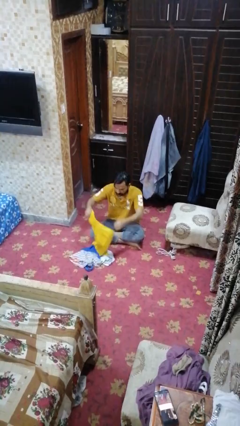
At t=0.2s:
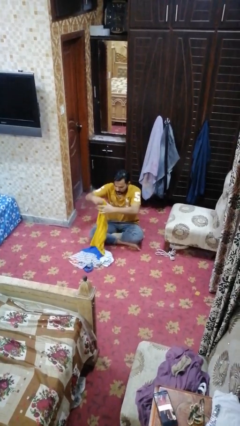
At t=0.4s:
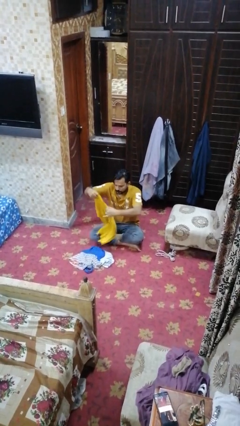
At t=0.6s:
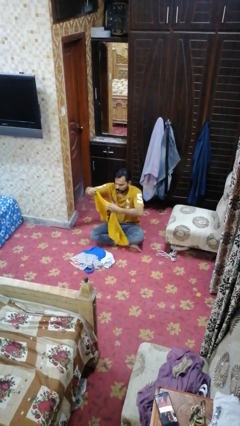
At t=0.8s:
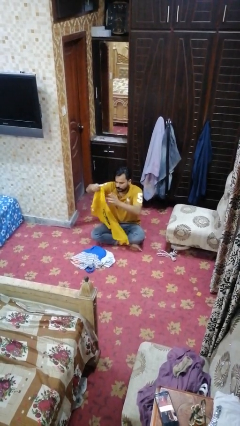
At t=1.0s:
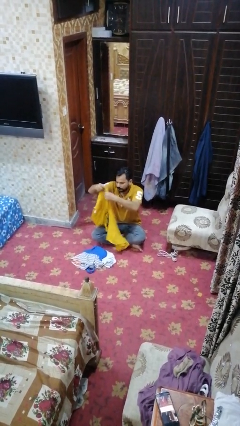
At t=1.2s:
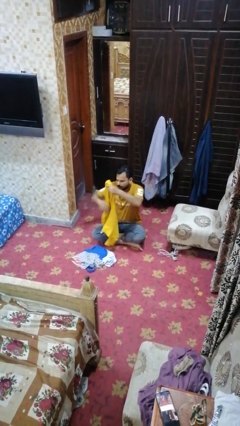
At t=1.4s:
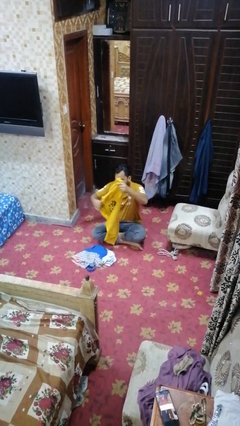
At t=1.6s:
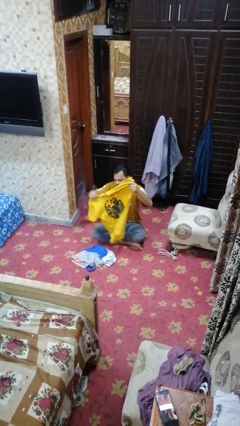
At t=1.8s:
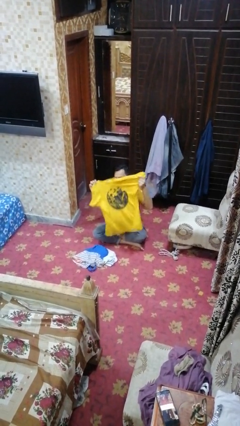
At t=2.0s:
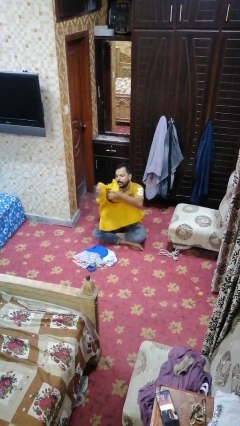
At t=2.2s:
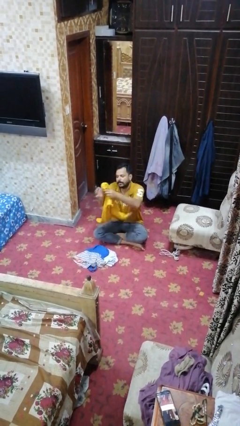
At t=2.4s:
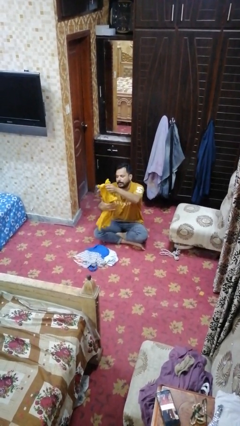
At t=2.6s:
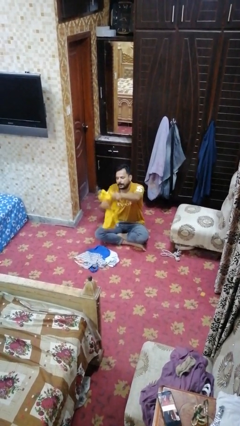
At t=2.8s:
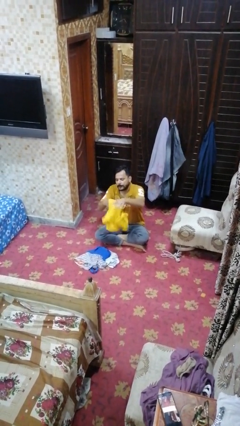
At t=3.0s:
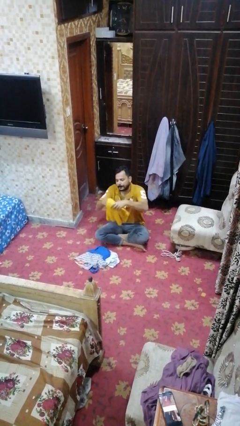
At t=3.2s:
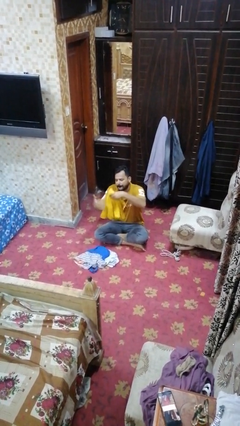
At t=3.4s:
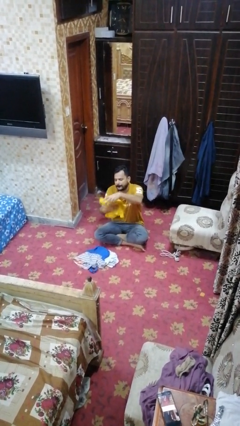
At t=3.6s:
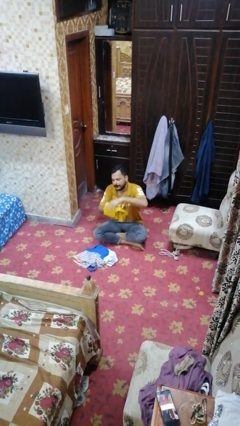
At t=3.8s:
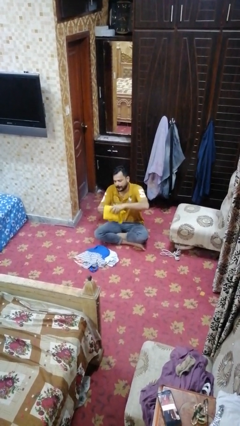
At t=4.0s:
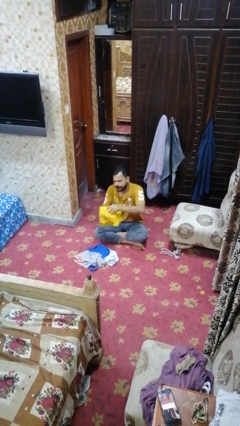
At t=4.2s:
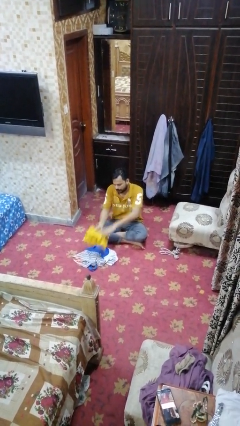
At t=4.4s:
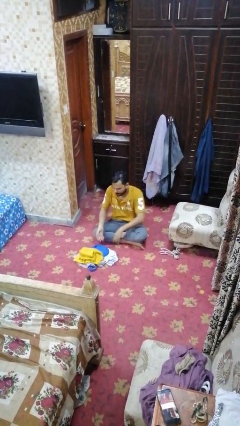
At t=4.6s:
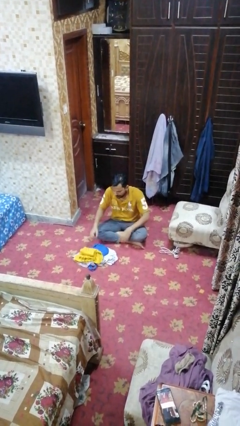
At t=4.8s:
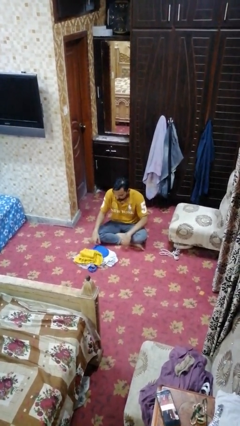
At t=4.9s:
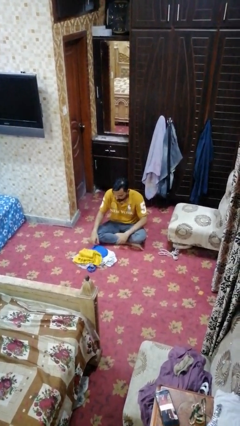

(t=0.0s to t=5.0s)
person folds shirt

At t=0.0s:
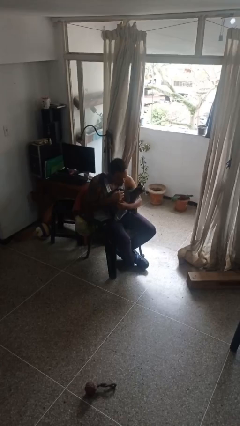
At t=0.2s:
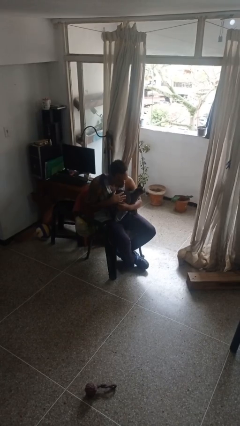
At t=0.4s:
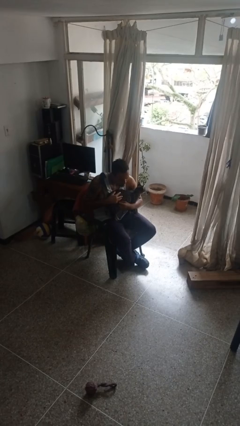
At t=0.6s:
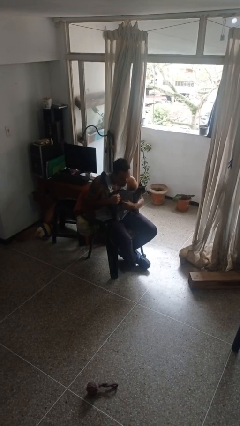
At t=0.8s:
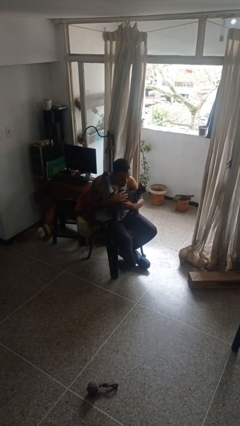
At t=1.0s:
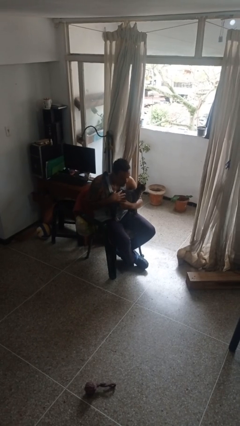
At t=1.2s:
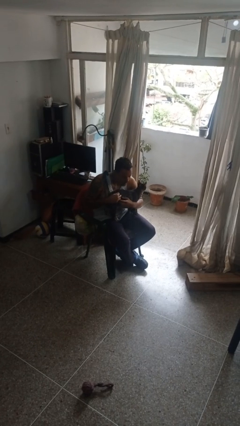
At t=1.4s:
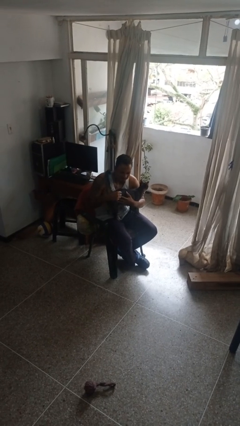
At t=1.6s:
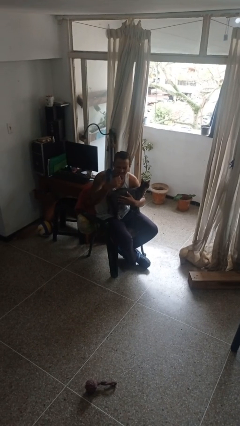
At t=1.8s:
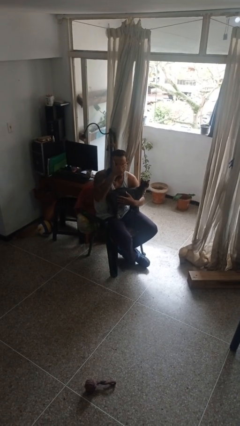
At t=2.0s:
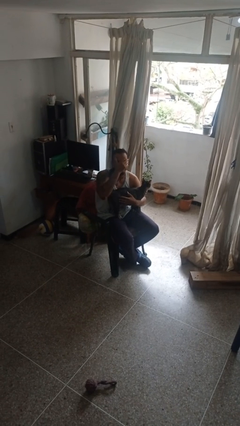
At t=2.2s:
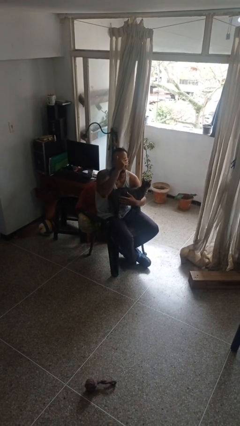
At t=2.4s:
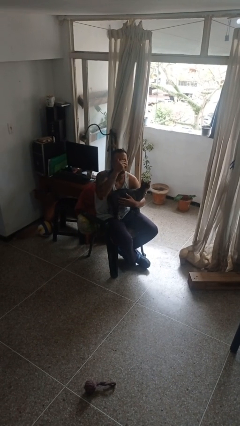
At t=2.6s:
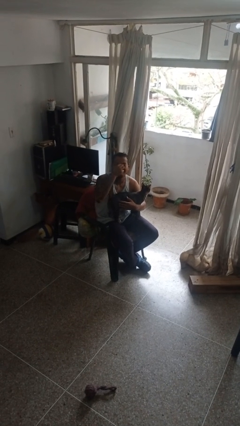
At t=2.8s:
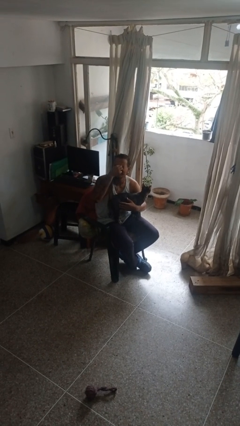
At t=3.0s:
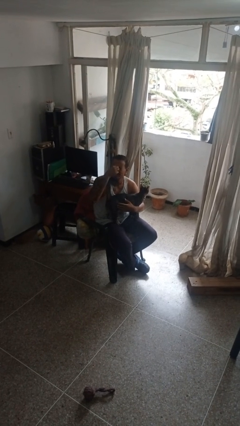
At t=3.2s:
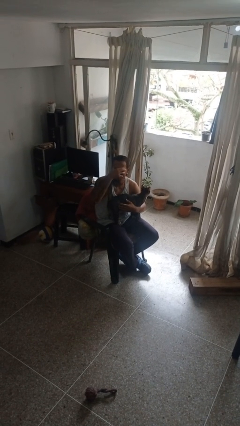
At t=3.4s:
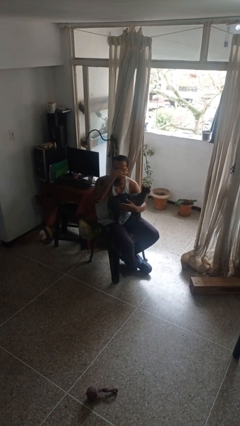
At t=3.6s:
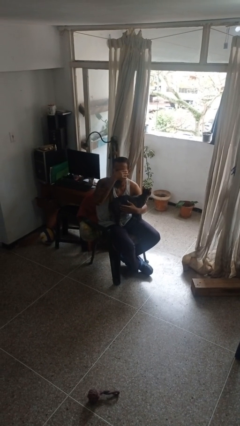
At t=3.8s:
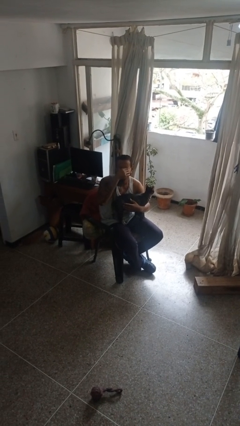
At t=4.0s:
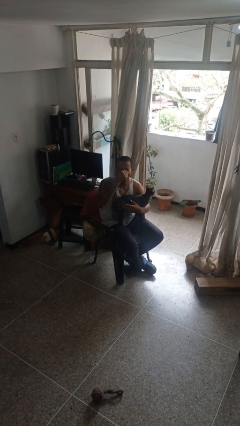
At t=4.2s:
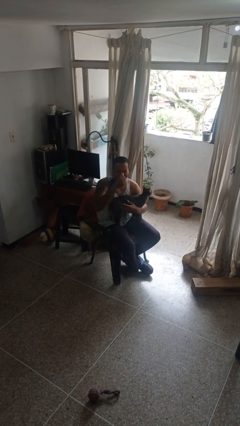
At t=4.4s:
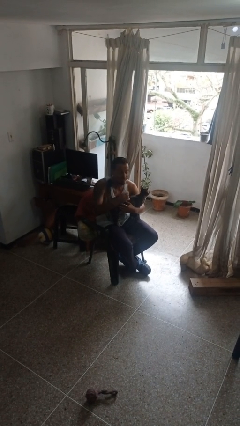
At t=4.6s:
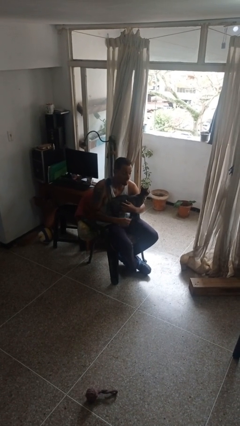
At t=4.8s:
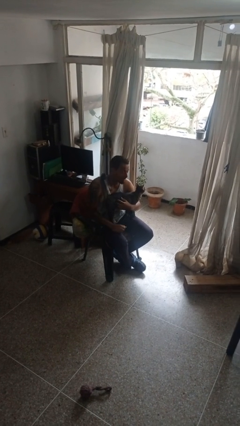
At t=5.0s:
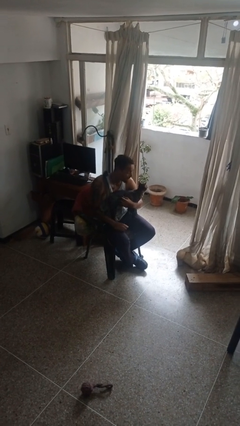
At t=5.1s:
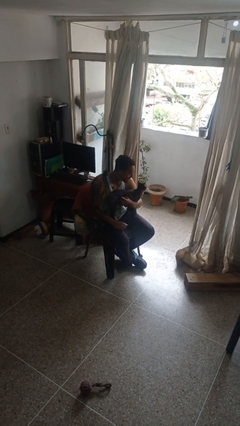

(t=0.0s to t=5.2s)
person rubs eyes

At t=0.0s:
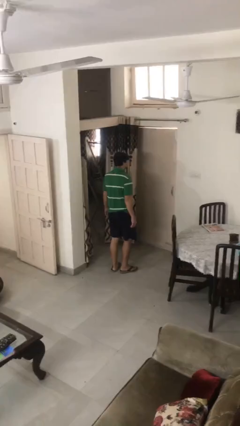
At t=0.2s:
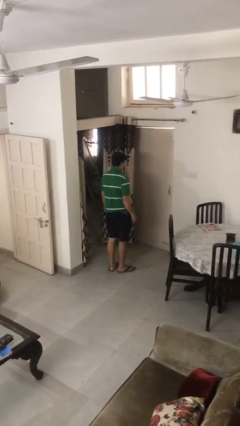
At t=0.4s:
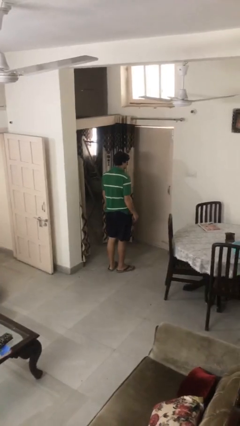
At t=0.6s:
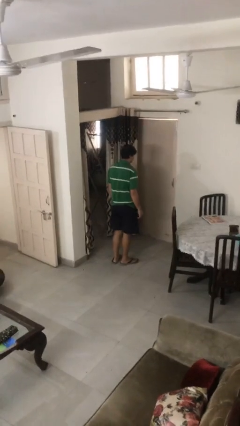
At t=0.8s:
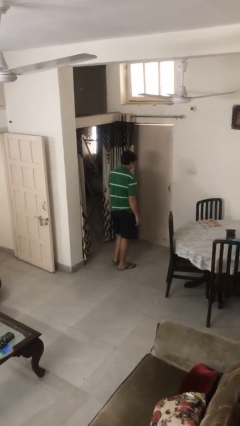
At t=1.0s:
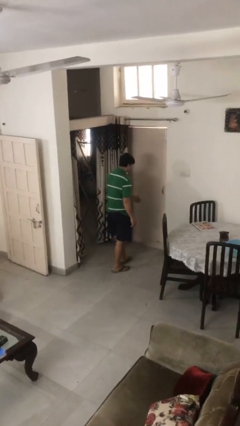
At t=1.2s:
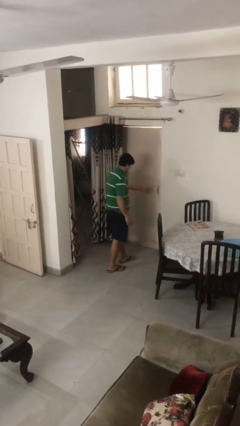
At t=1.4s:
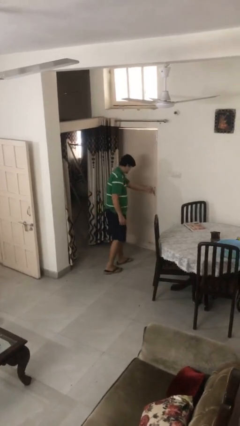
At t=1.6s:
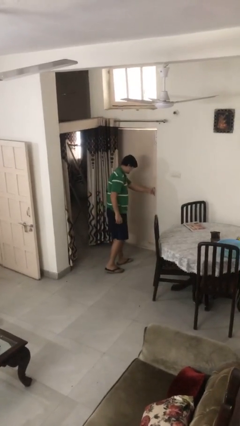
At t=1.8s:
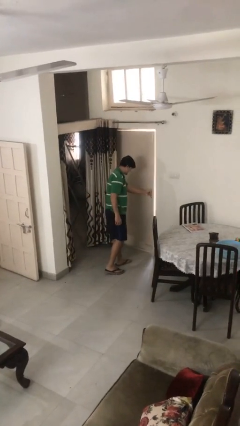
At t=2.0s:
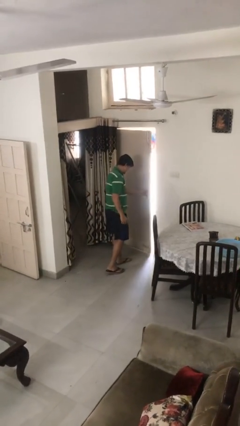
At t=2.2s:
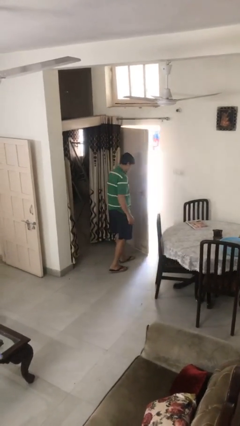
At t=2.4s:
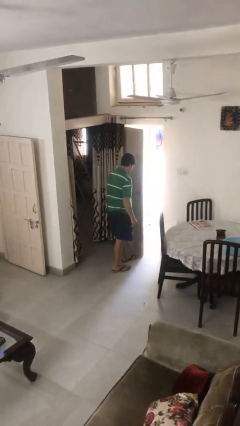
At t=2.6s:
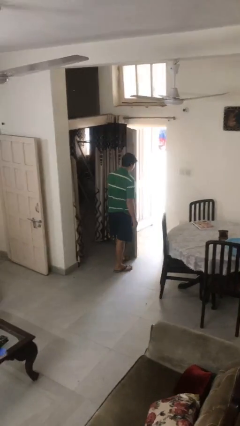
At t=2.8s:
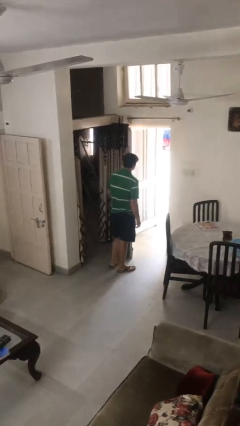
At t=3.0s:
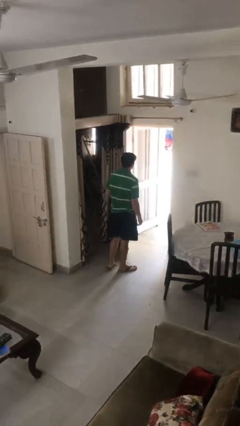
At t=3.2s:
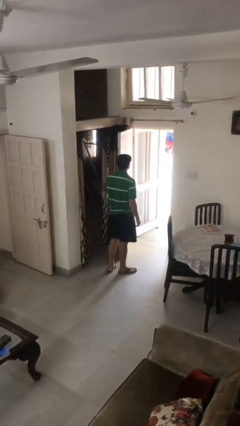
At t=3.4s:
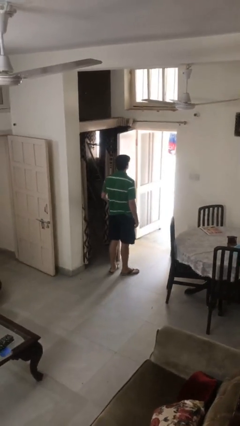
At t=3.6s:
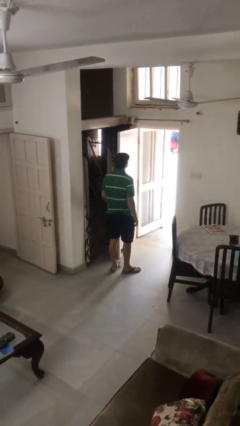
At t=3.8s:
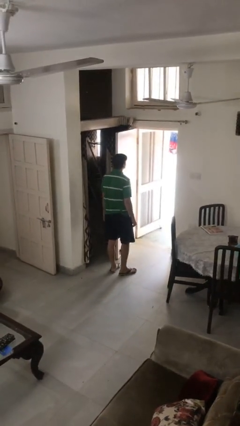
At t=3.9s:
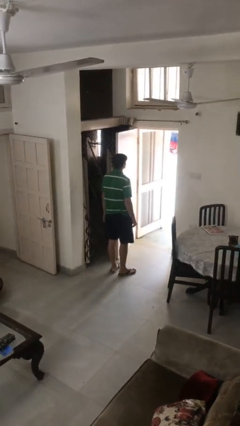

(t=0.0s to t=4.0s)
person opens facility door

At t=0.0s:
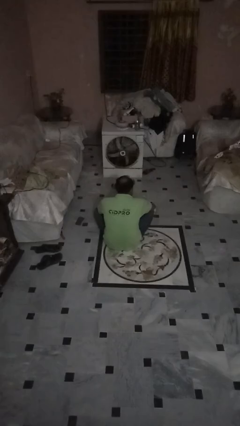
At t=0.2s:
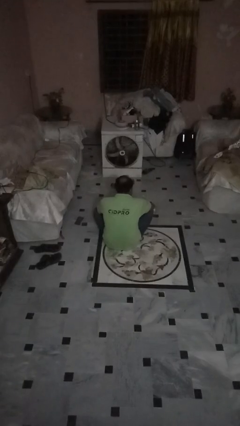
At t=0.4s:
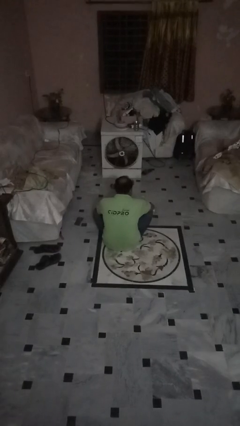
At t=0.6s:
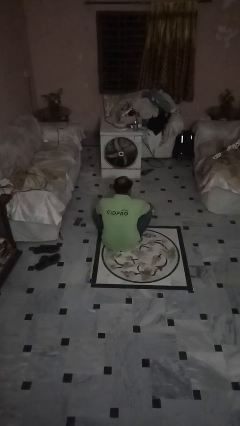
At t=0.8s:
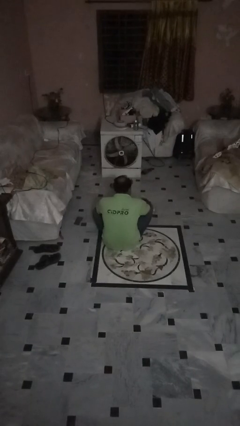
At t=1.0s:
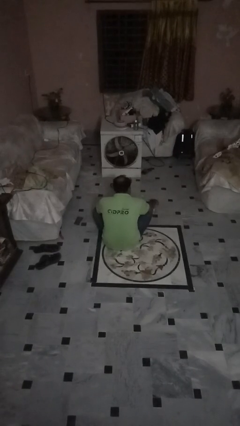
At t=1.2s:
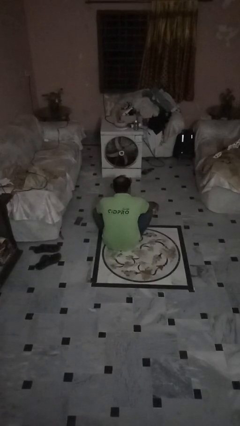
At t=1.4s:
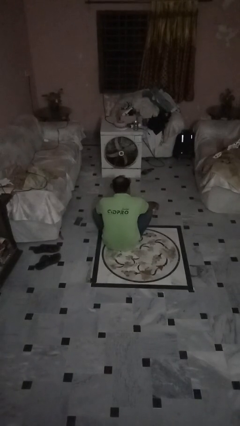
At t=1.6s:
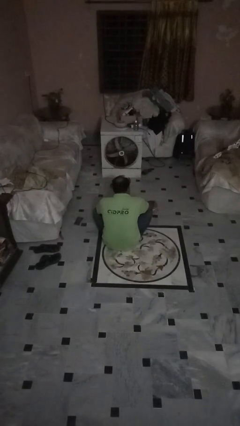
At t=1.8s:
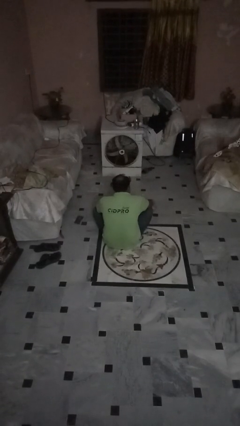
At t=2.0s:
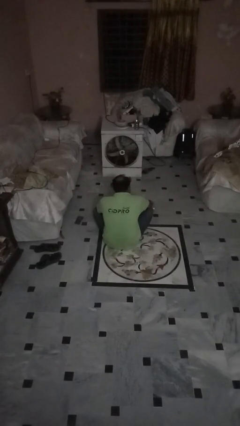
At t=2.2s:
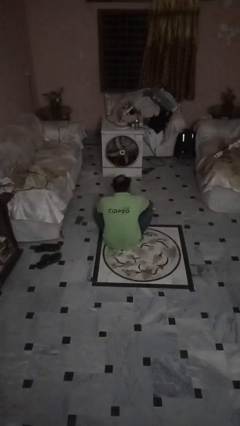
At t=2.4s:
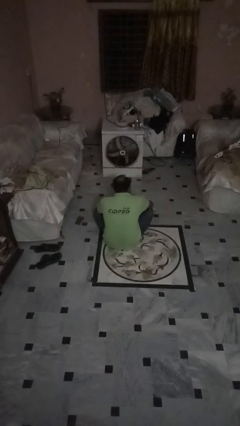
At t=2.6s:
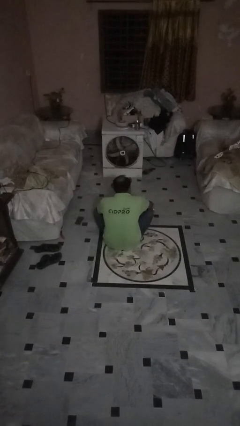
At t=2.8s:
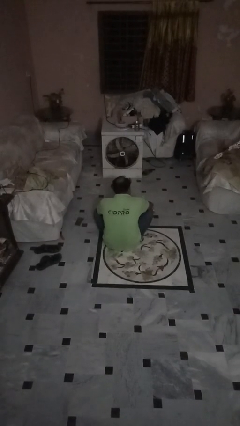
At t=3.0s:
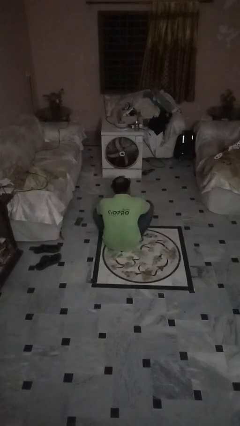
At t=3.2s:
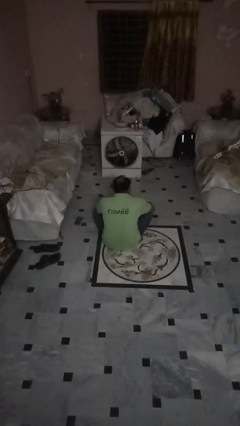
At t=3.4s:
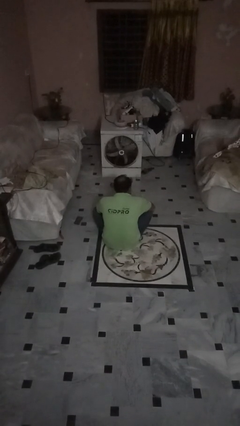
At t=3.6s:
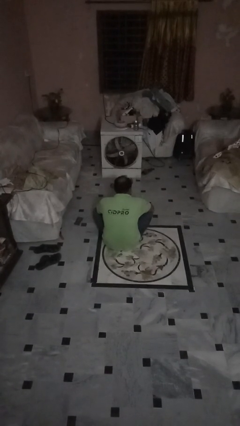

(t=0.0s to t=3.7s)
person spills on floor
